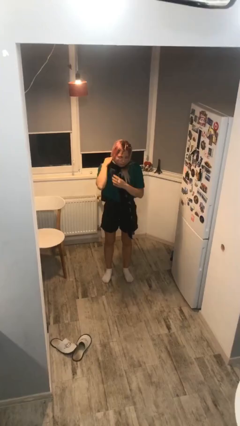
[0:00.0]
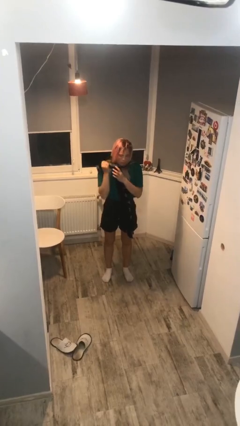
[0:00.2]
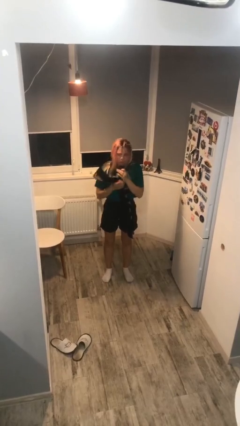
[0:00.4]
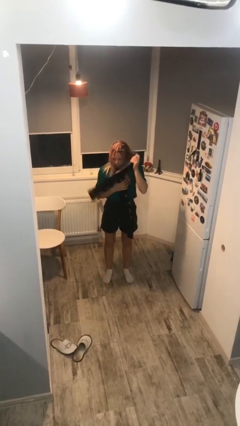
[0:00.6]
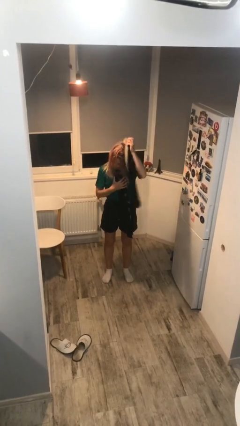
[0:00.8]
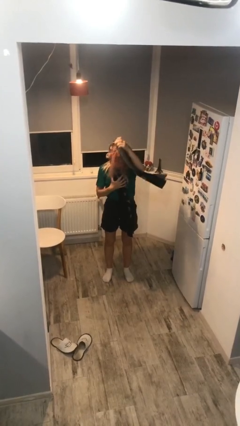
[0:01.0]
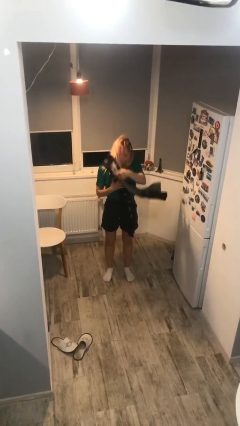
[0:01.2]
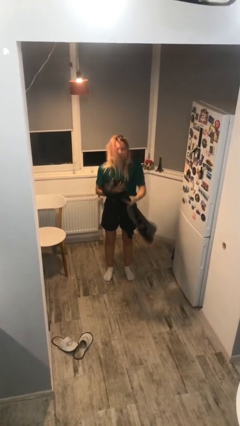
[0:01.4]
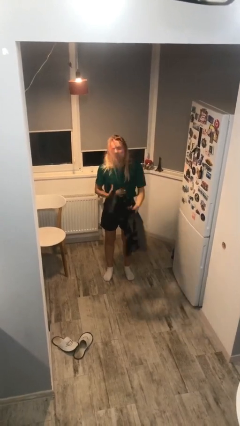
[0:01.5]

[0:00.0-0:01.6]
person takes off scarf

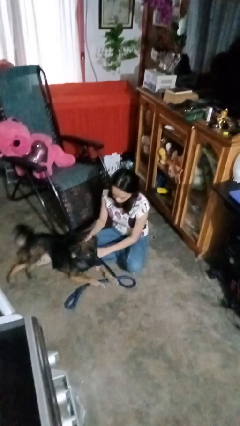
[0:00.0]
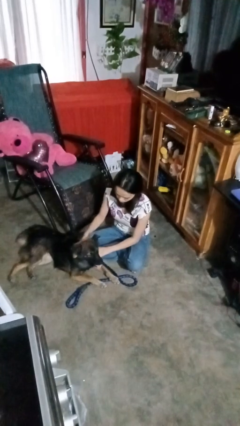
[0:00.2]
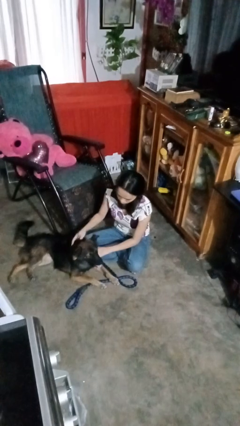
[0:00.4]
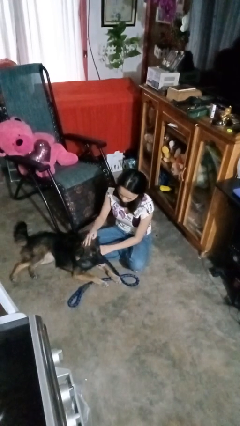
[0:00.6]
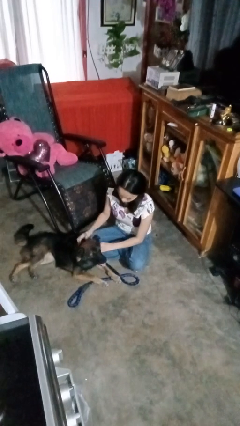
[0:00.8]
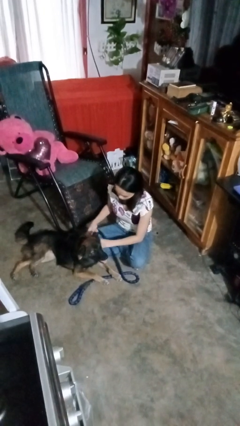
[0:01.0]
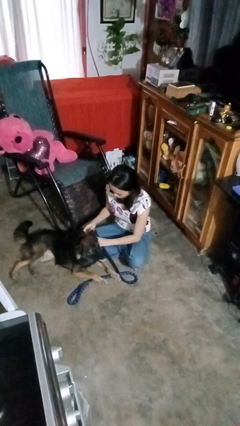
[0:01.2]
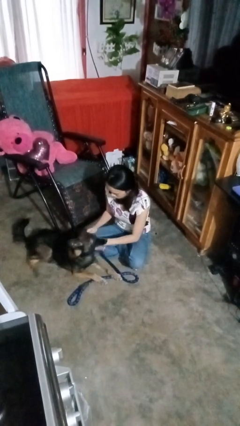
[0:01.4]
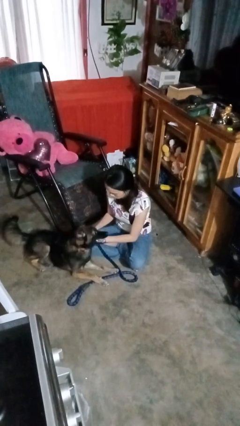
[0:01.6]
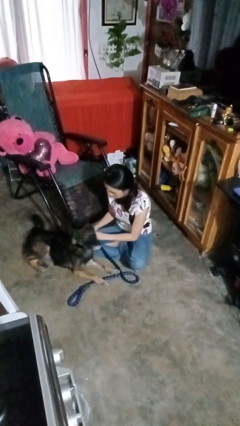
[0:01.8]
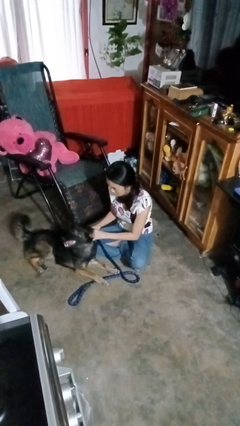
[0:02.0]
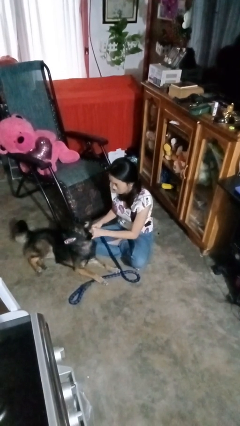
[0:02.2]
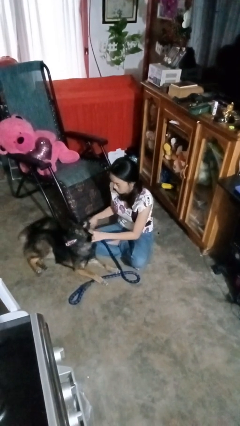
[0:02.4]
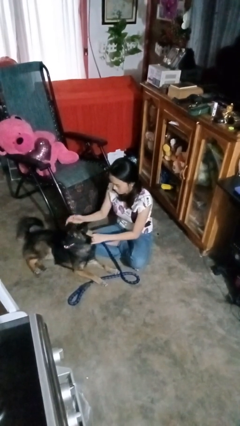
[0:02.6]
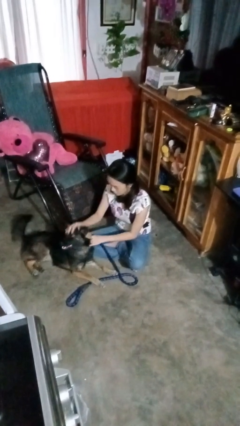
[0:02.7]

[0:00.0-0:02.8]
person attaches leash to dog

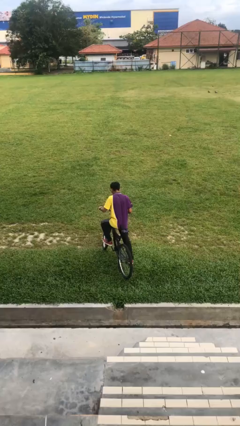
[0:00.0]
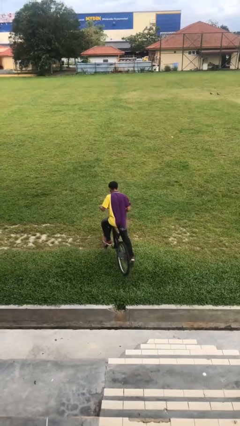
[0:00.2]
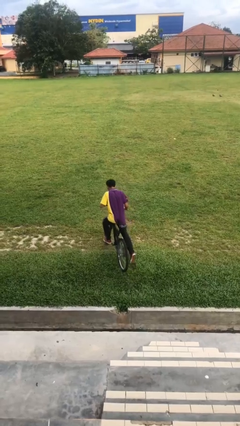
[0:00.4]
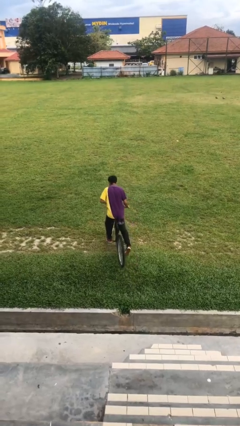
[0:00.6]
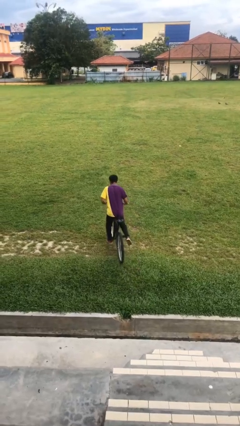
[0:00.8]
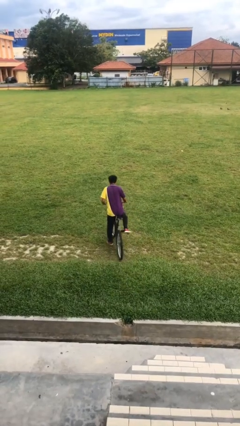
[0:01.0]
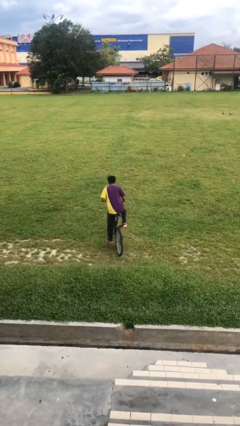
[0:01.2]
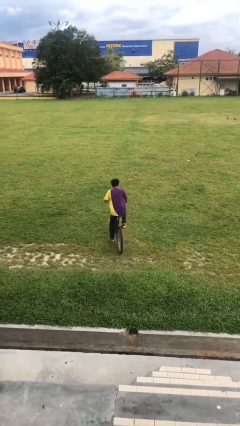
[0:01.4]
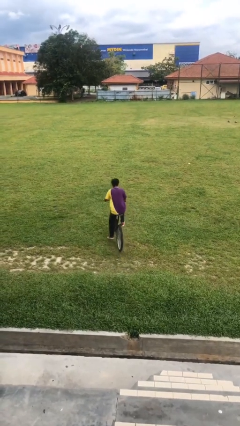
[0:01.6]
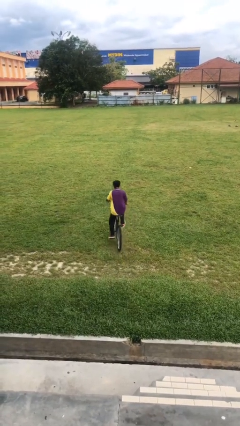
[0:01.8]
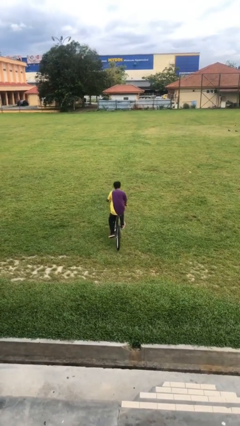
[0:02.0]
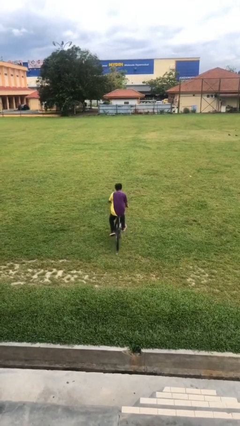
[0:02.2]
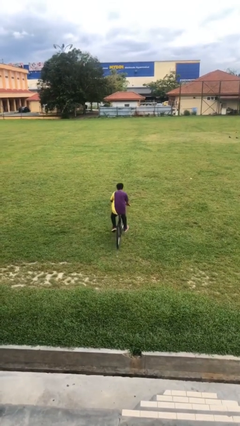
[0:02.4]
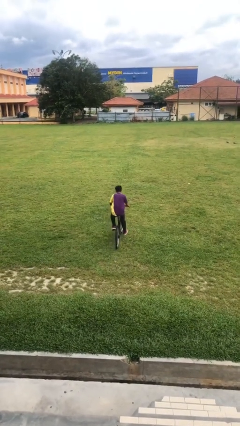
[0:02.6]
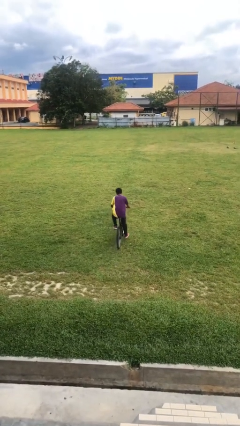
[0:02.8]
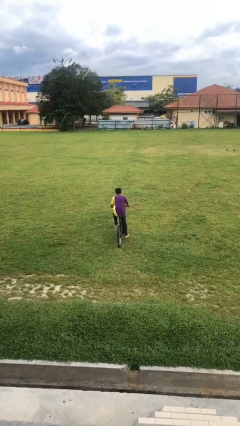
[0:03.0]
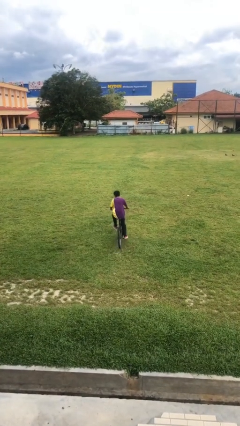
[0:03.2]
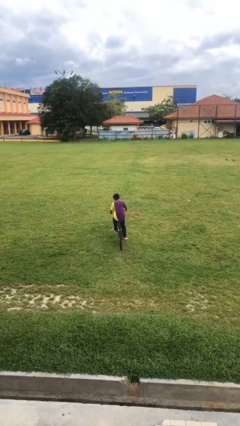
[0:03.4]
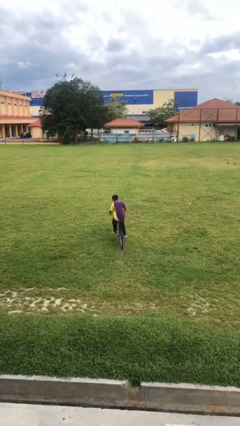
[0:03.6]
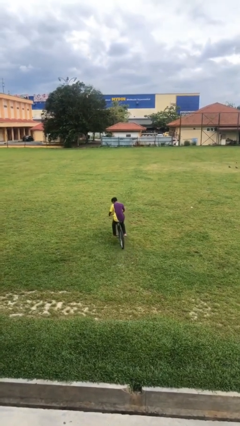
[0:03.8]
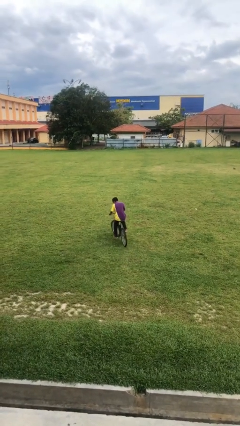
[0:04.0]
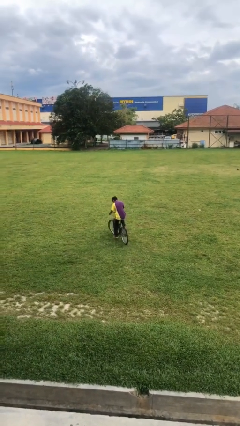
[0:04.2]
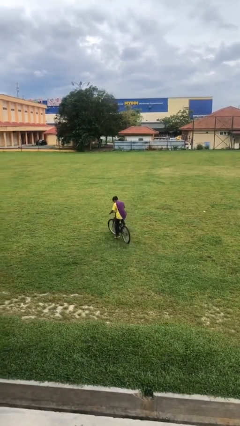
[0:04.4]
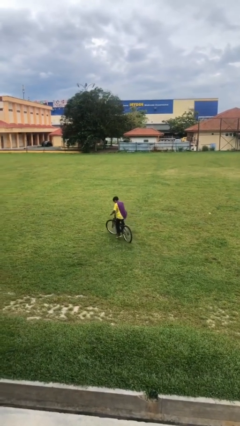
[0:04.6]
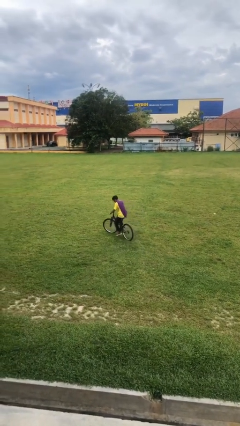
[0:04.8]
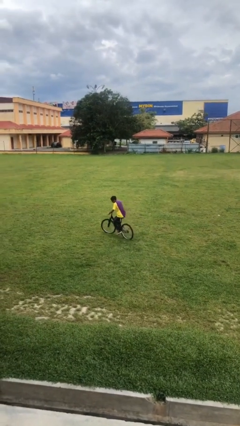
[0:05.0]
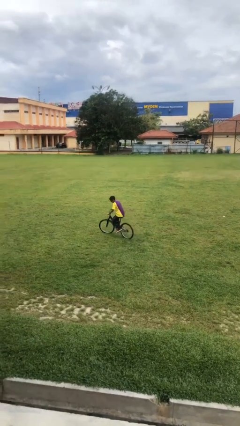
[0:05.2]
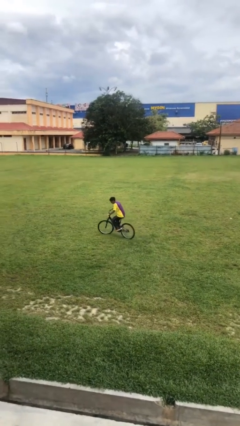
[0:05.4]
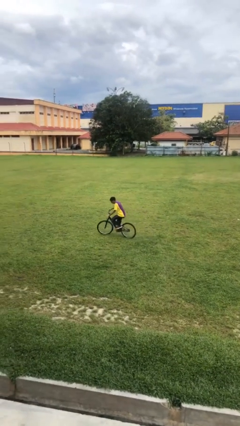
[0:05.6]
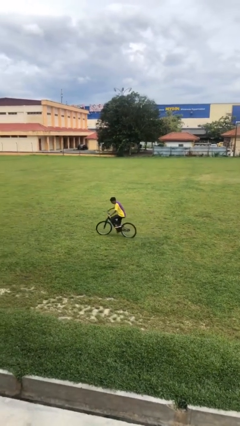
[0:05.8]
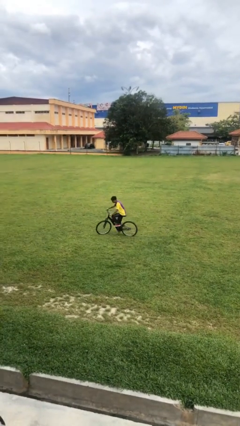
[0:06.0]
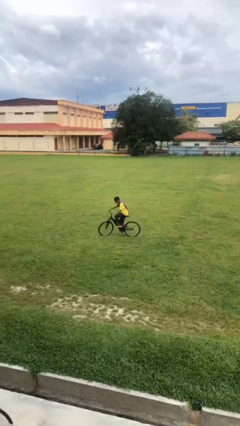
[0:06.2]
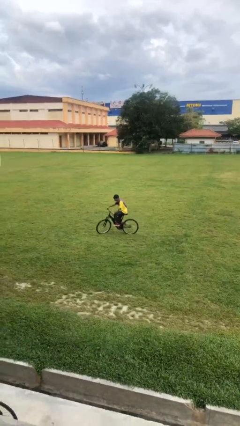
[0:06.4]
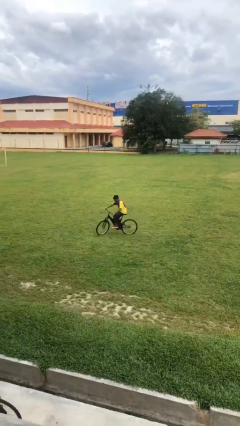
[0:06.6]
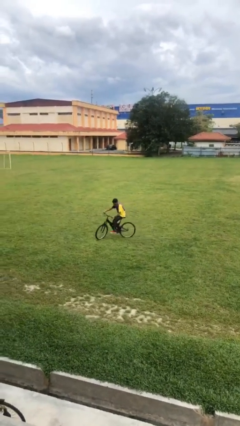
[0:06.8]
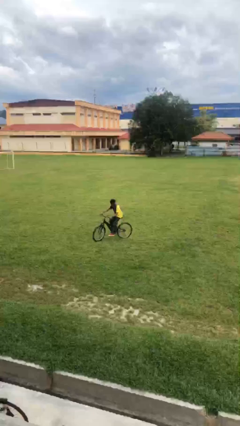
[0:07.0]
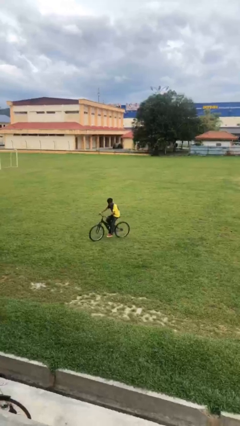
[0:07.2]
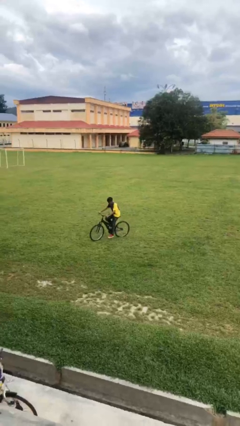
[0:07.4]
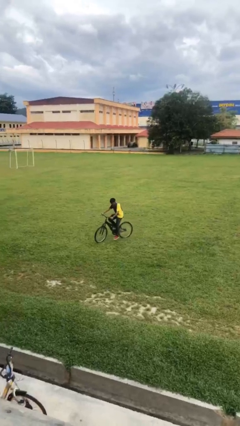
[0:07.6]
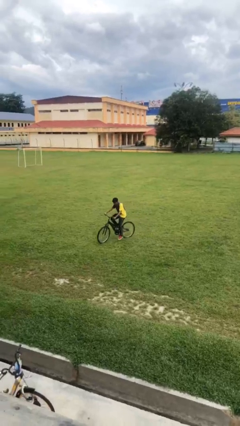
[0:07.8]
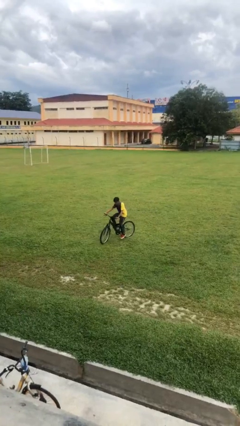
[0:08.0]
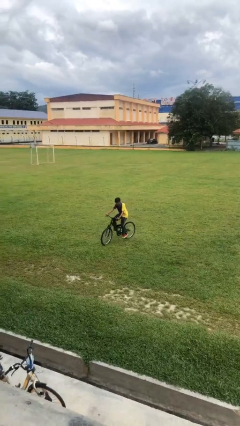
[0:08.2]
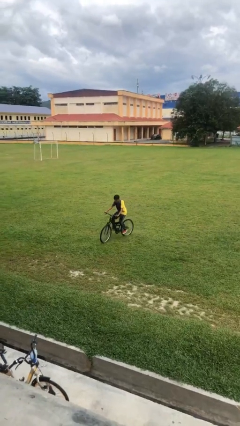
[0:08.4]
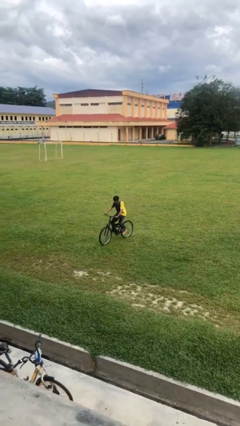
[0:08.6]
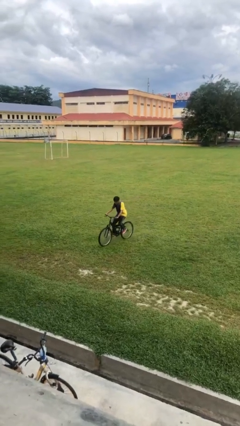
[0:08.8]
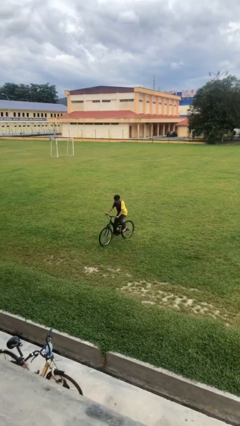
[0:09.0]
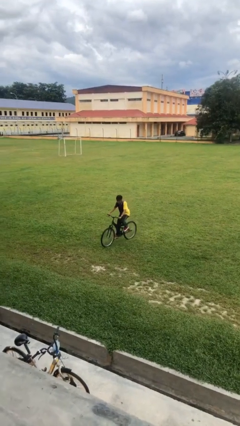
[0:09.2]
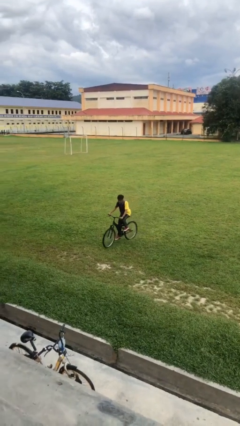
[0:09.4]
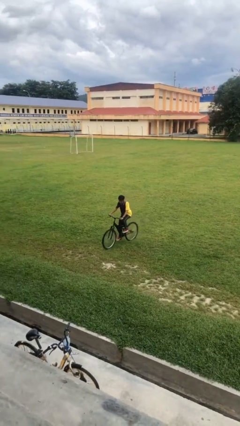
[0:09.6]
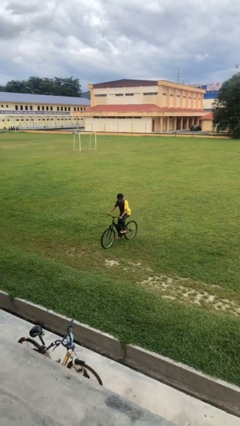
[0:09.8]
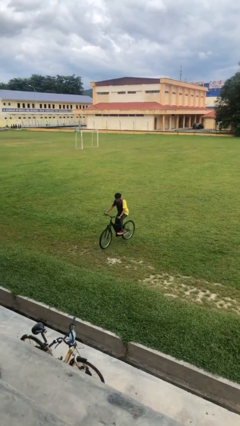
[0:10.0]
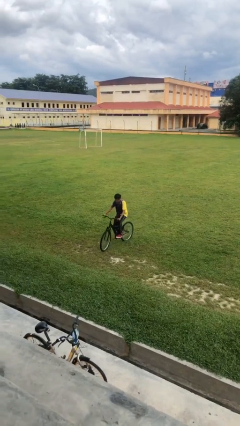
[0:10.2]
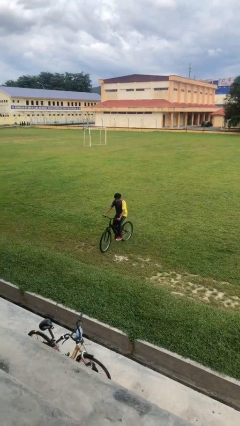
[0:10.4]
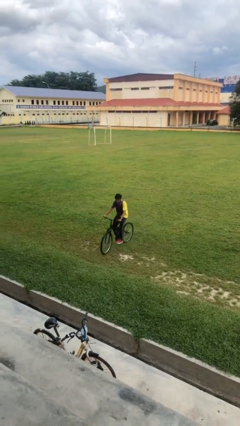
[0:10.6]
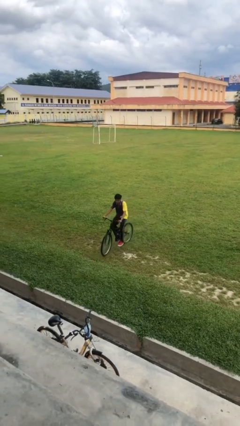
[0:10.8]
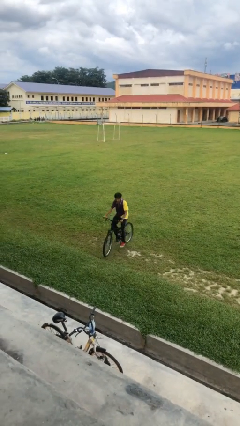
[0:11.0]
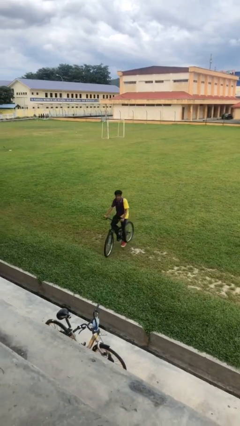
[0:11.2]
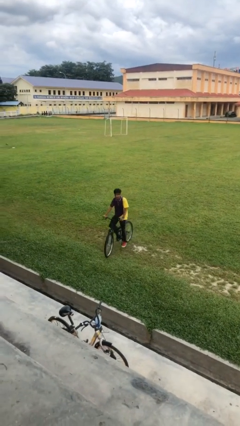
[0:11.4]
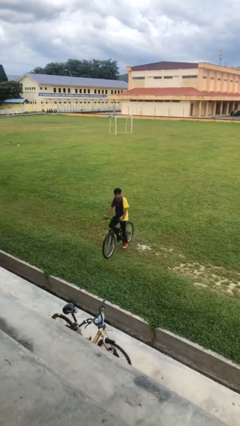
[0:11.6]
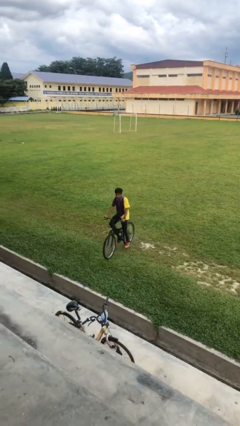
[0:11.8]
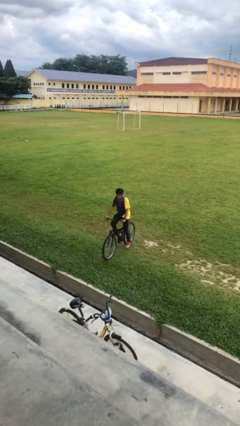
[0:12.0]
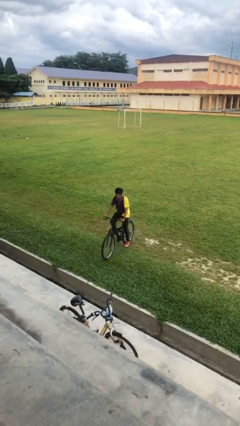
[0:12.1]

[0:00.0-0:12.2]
person rides bicycle

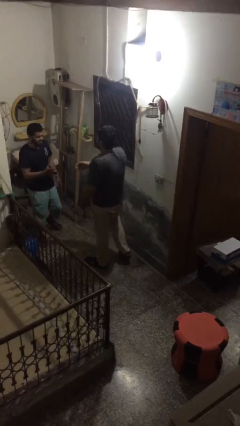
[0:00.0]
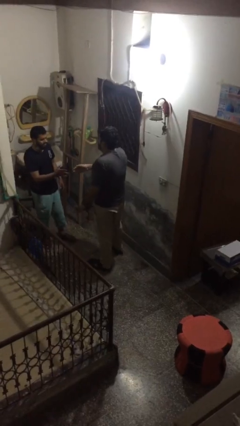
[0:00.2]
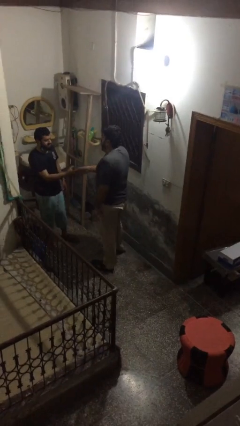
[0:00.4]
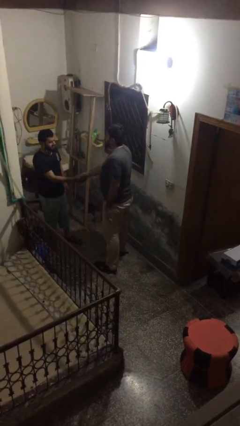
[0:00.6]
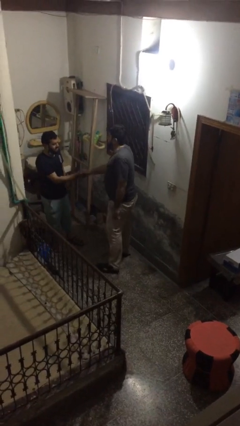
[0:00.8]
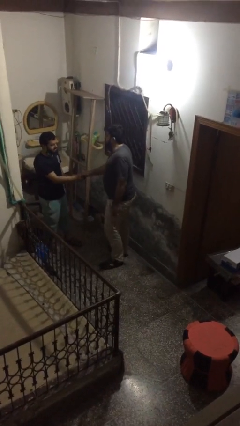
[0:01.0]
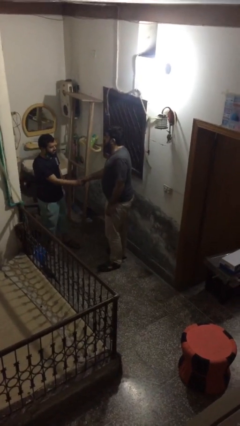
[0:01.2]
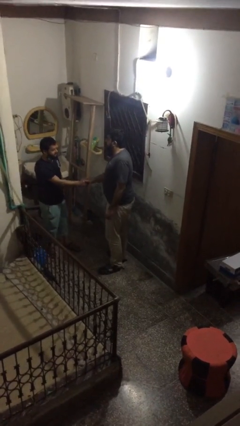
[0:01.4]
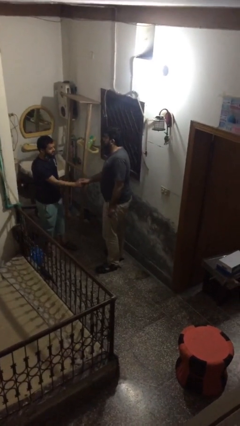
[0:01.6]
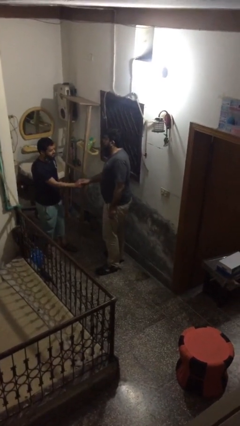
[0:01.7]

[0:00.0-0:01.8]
person shakes hand
